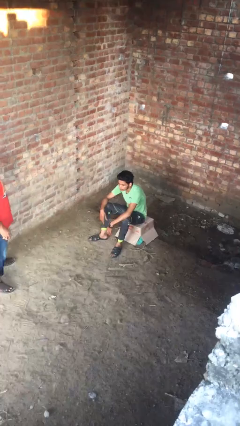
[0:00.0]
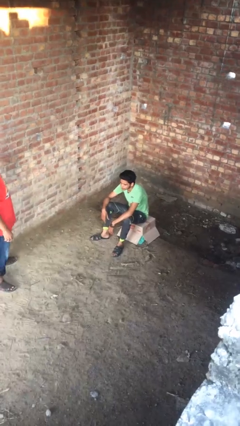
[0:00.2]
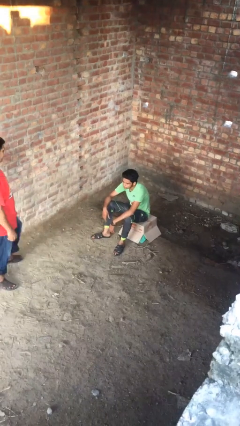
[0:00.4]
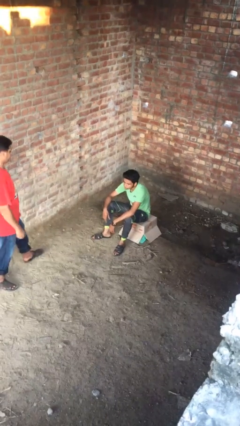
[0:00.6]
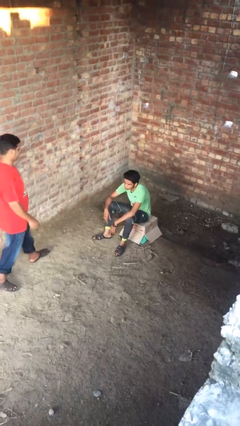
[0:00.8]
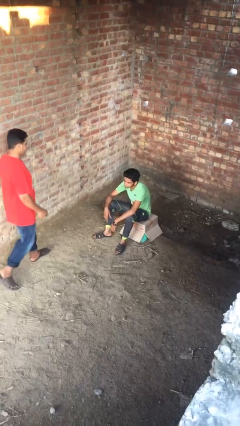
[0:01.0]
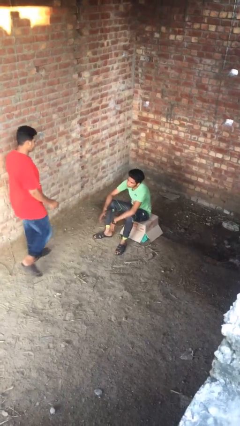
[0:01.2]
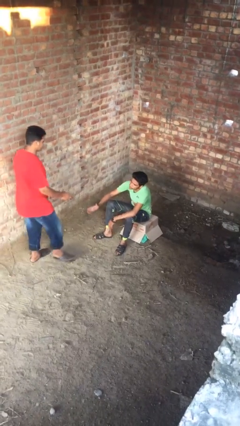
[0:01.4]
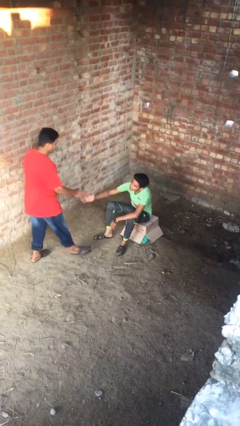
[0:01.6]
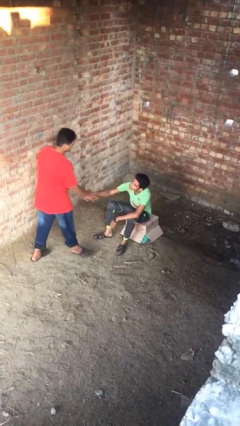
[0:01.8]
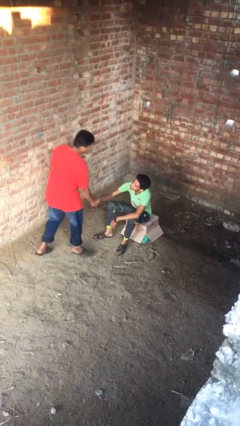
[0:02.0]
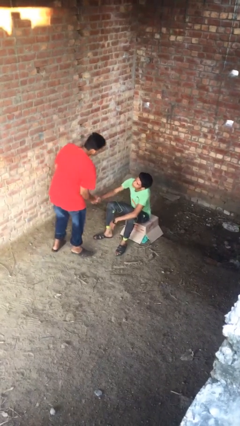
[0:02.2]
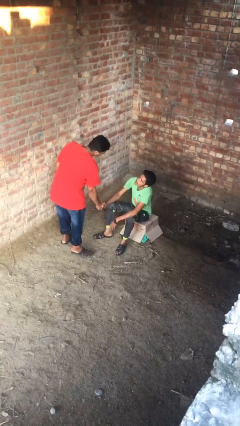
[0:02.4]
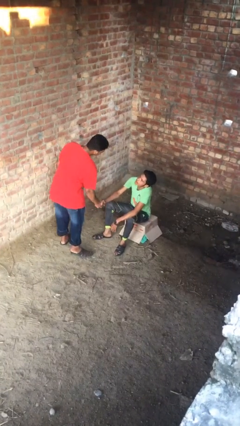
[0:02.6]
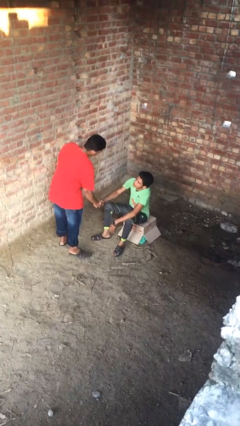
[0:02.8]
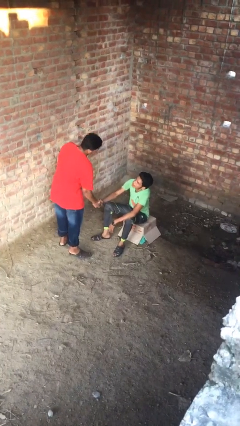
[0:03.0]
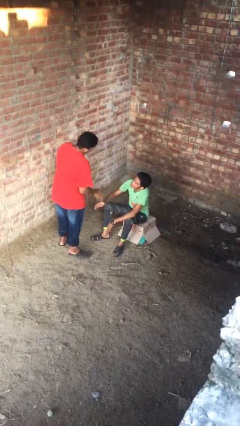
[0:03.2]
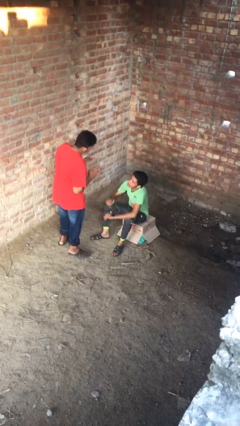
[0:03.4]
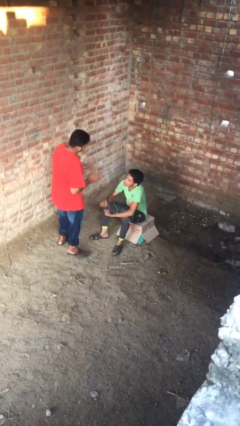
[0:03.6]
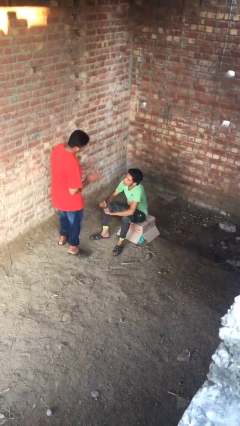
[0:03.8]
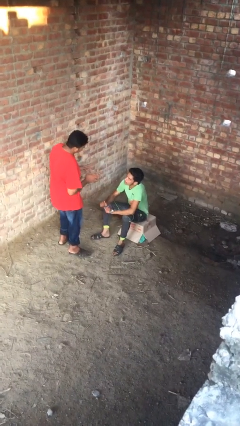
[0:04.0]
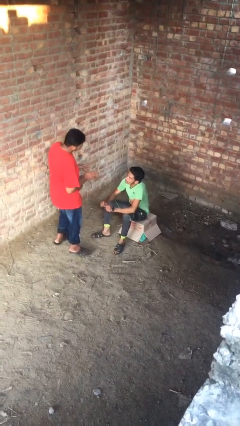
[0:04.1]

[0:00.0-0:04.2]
person shakes hand

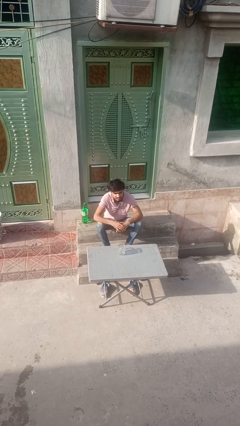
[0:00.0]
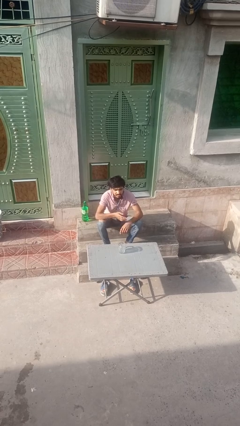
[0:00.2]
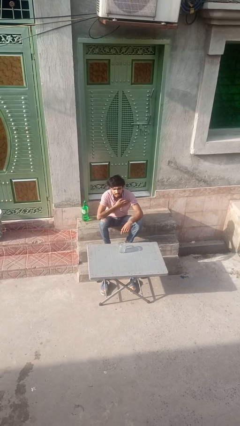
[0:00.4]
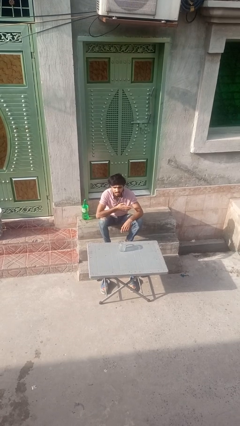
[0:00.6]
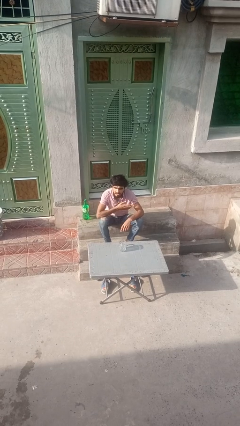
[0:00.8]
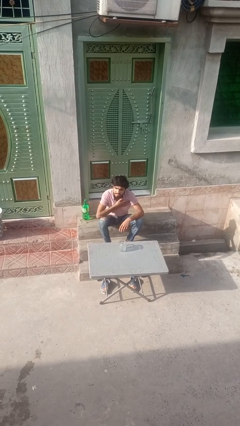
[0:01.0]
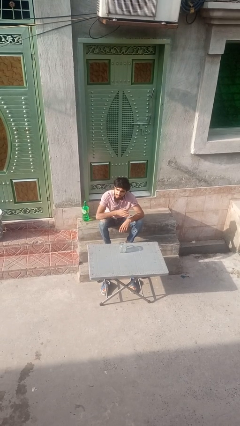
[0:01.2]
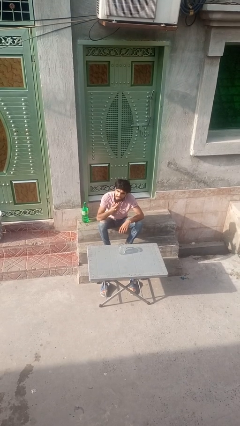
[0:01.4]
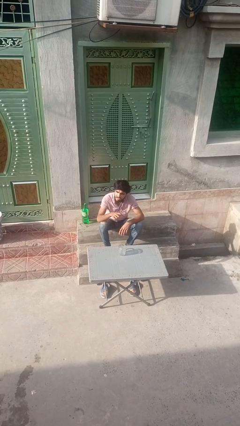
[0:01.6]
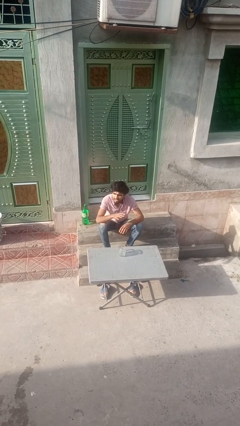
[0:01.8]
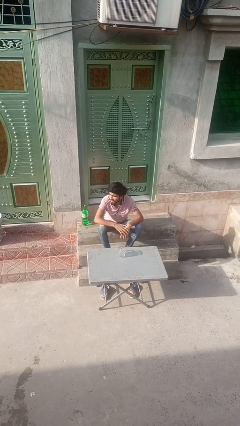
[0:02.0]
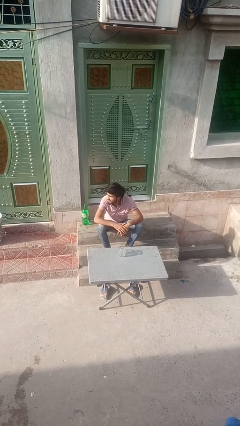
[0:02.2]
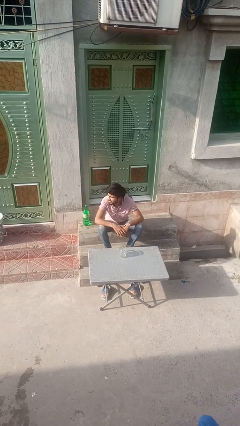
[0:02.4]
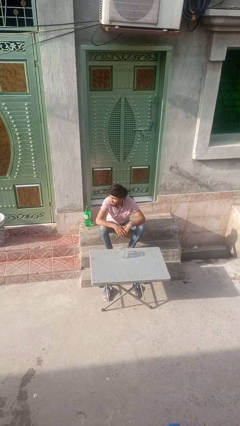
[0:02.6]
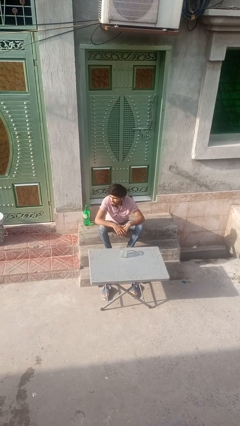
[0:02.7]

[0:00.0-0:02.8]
person drums on chest

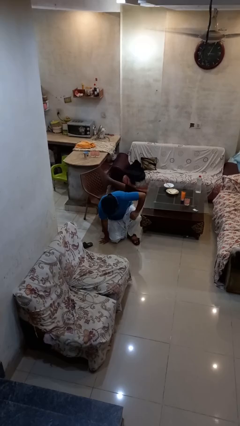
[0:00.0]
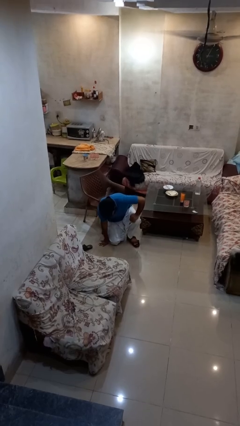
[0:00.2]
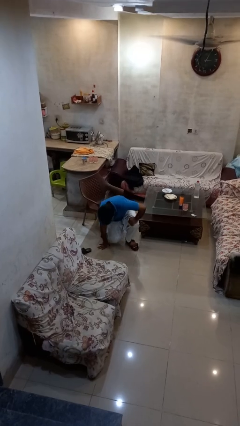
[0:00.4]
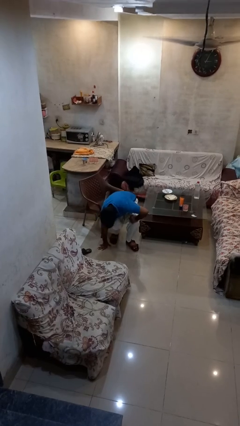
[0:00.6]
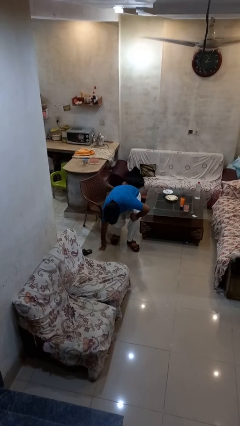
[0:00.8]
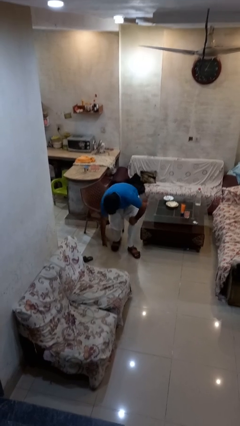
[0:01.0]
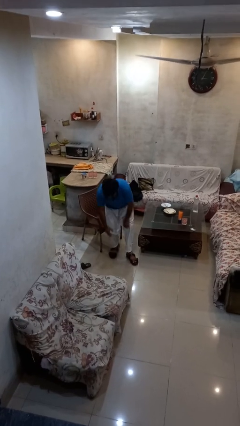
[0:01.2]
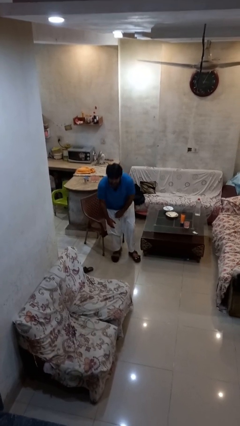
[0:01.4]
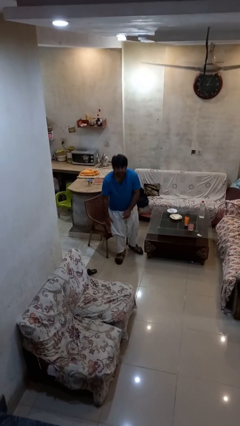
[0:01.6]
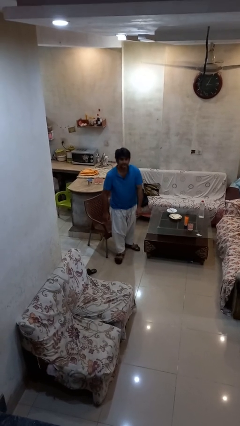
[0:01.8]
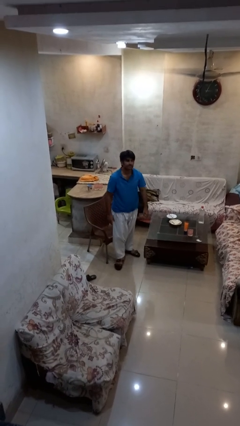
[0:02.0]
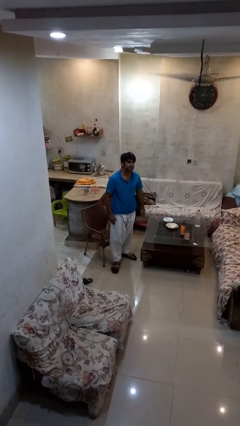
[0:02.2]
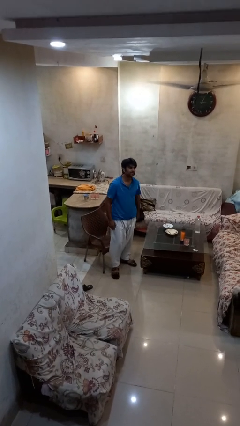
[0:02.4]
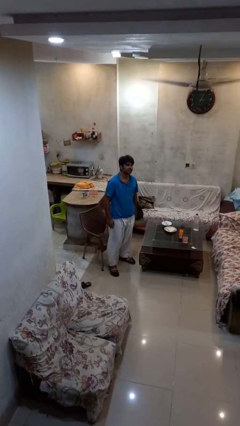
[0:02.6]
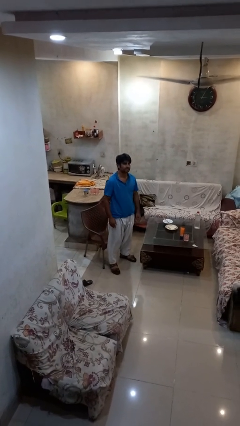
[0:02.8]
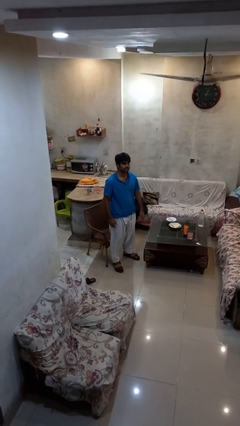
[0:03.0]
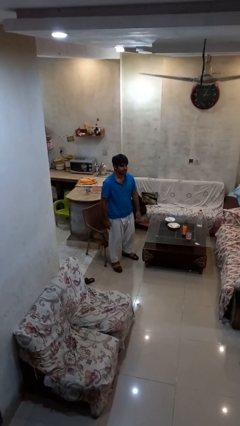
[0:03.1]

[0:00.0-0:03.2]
person stands up from floor

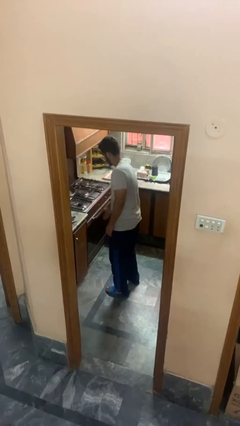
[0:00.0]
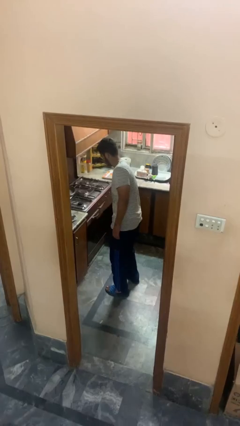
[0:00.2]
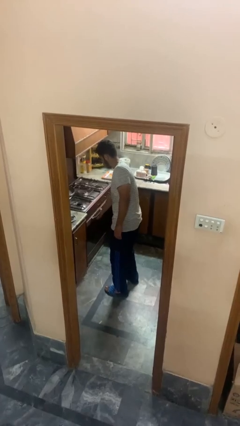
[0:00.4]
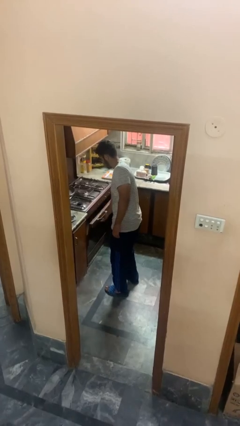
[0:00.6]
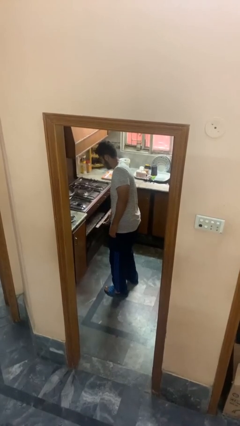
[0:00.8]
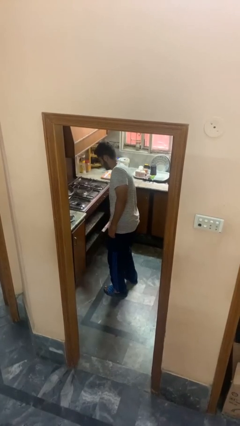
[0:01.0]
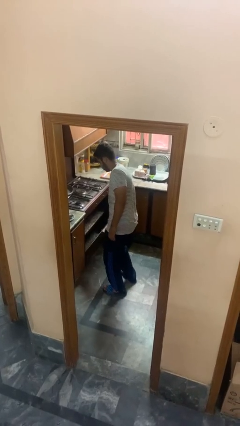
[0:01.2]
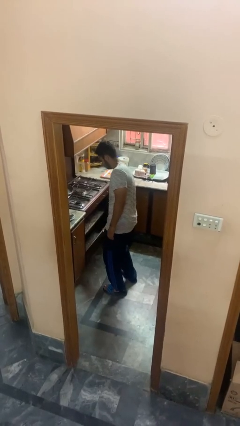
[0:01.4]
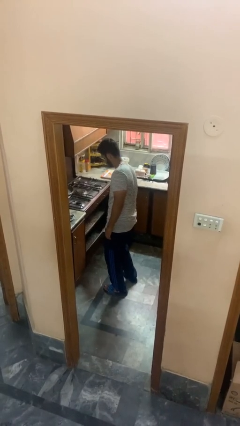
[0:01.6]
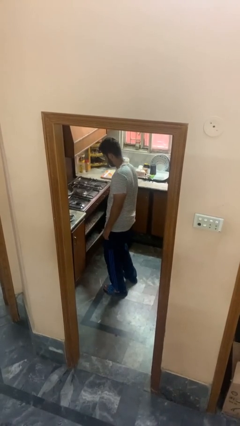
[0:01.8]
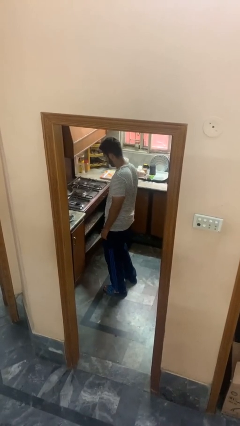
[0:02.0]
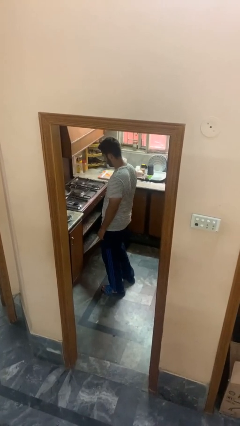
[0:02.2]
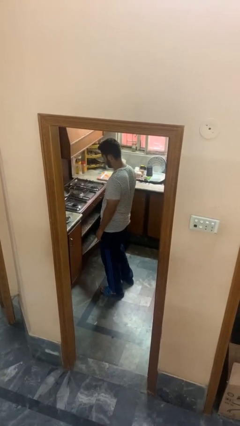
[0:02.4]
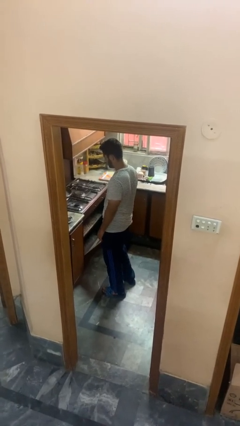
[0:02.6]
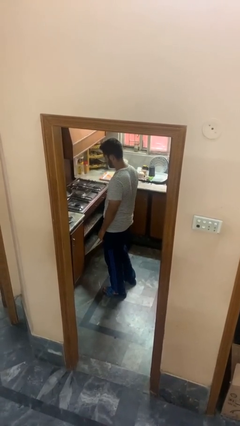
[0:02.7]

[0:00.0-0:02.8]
person opens oven door

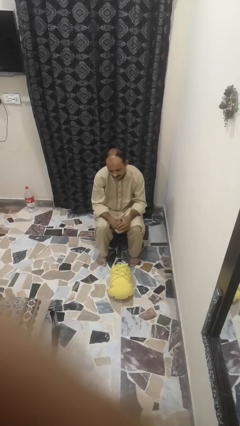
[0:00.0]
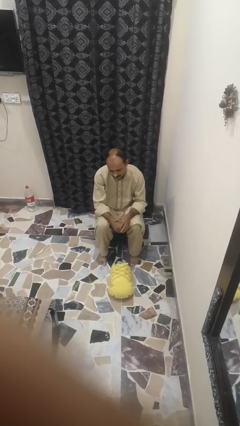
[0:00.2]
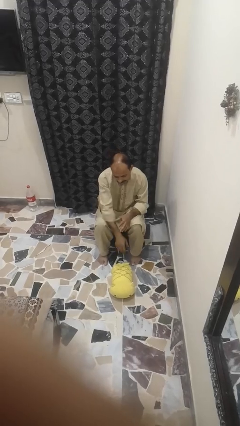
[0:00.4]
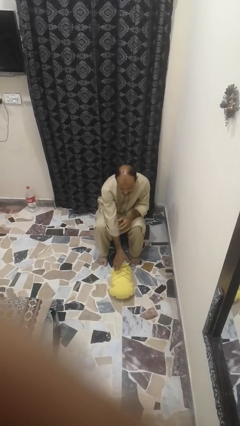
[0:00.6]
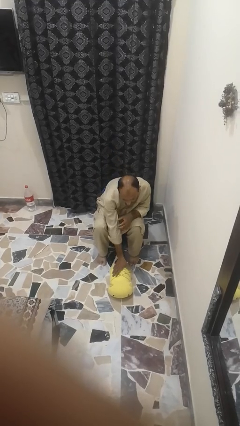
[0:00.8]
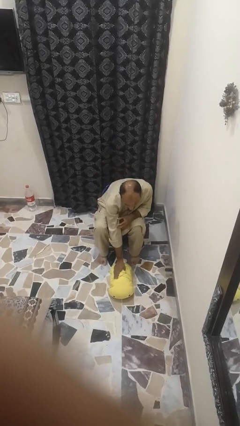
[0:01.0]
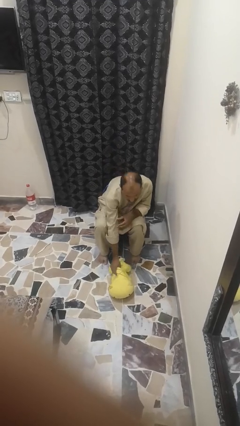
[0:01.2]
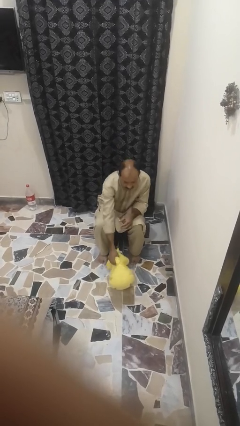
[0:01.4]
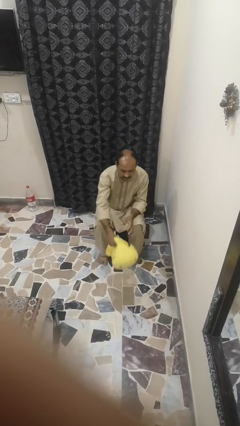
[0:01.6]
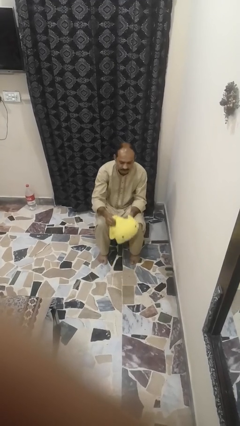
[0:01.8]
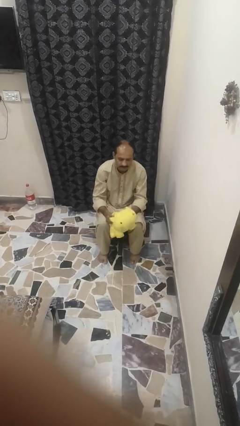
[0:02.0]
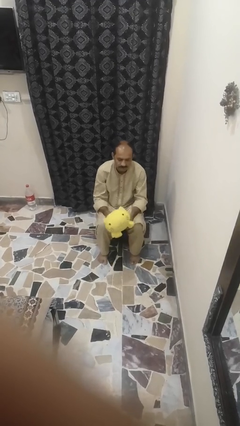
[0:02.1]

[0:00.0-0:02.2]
person picks up object from floor

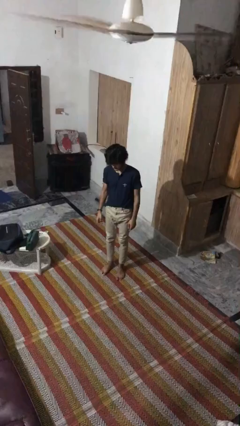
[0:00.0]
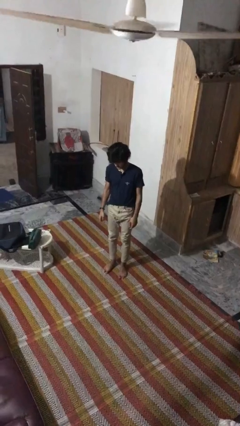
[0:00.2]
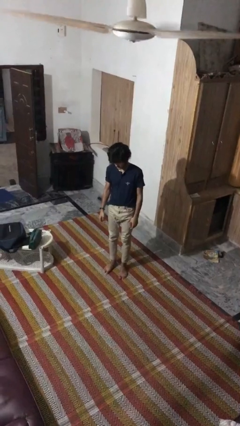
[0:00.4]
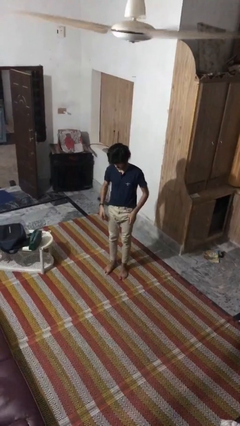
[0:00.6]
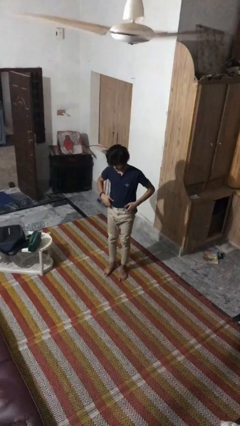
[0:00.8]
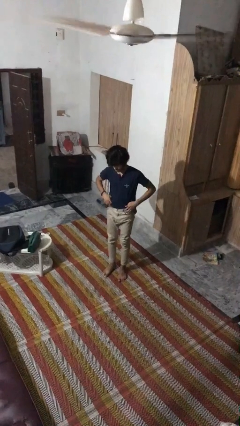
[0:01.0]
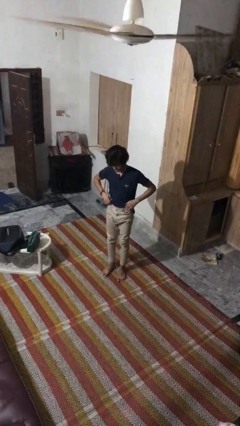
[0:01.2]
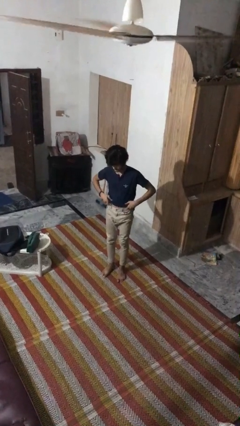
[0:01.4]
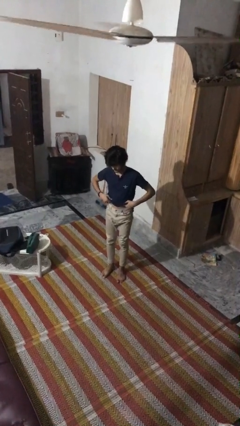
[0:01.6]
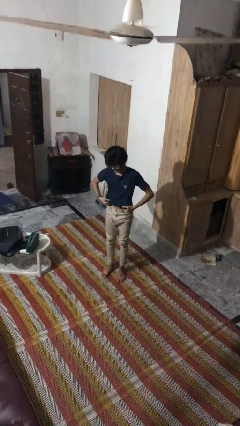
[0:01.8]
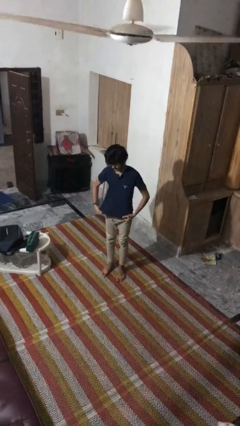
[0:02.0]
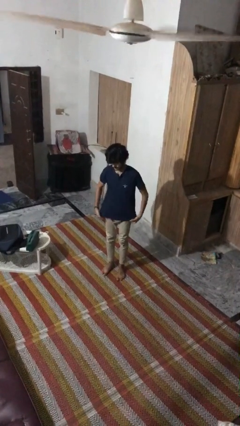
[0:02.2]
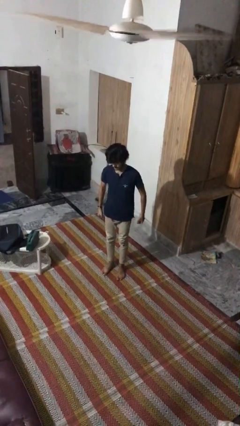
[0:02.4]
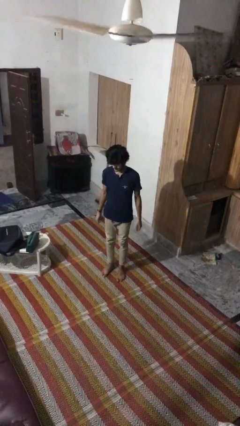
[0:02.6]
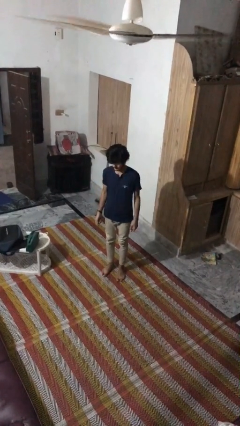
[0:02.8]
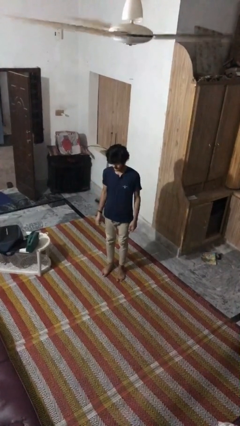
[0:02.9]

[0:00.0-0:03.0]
person untucks shirt
